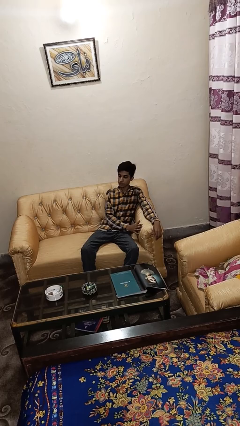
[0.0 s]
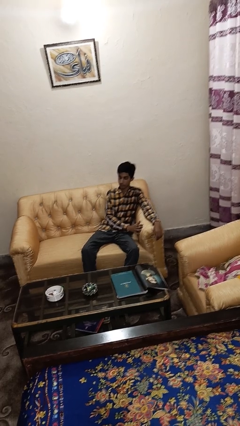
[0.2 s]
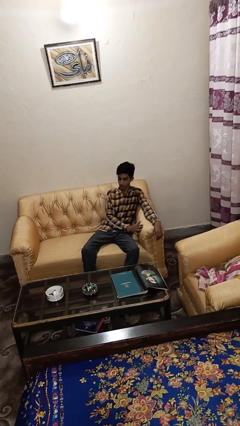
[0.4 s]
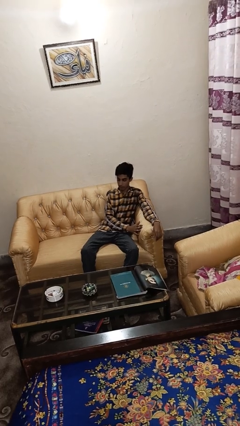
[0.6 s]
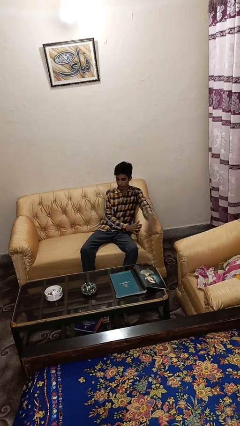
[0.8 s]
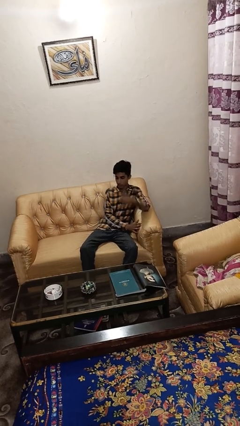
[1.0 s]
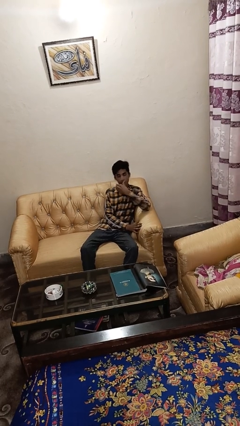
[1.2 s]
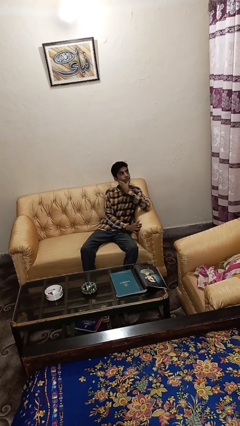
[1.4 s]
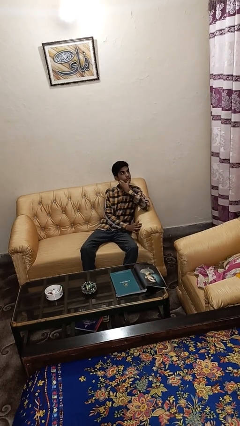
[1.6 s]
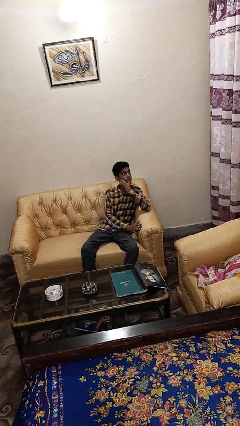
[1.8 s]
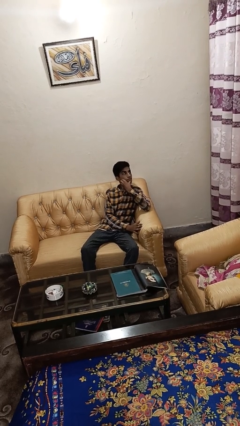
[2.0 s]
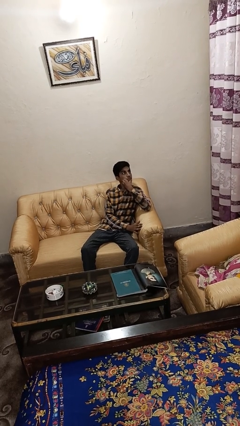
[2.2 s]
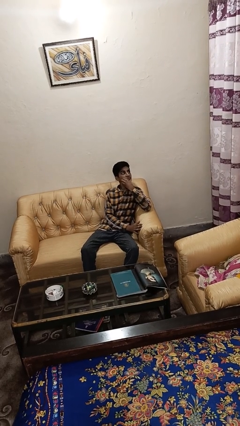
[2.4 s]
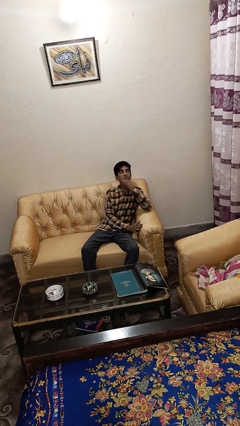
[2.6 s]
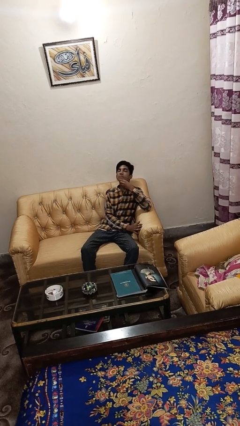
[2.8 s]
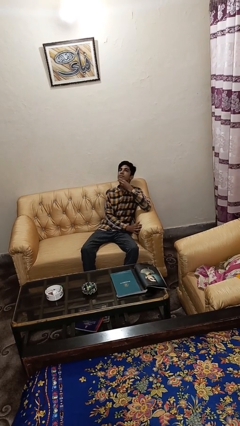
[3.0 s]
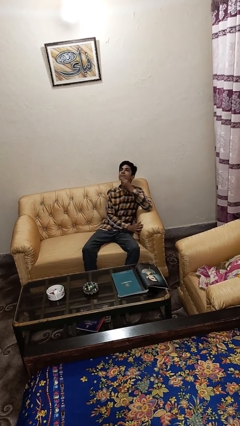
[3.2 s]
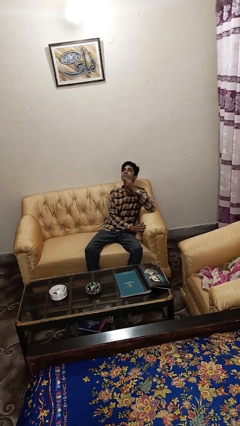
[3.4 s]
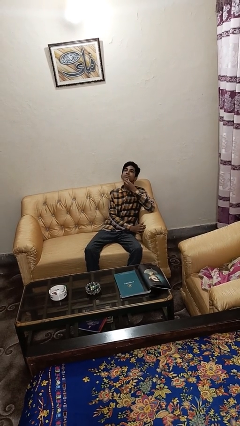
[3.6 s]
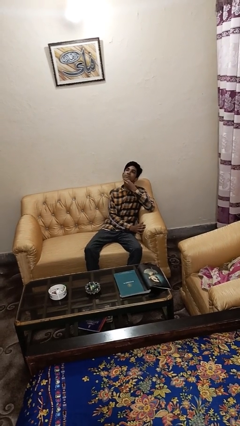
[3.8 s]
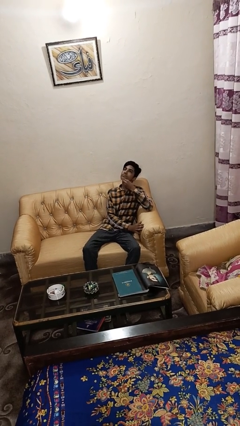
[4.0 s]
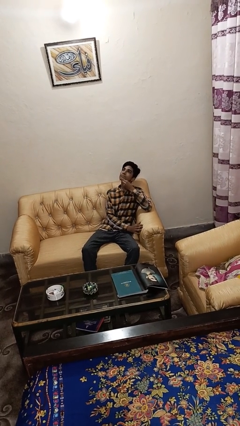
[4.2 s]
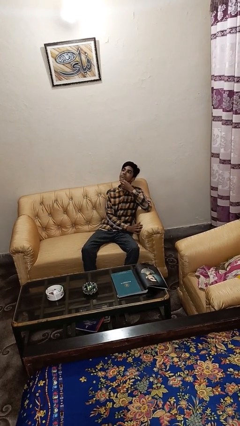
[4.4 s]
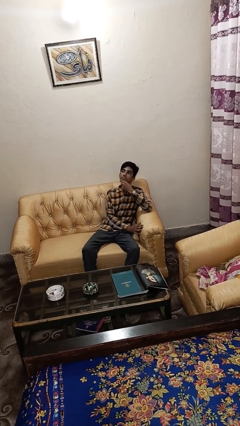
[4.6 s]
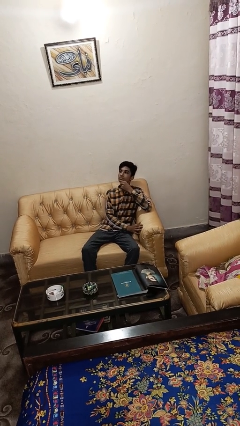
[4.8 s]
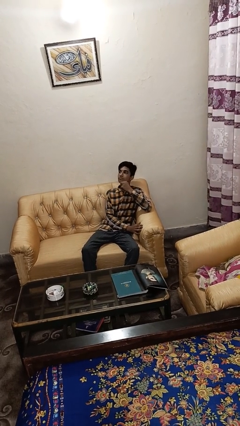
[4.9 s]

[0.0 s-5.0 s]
person strokes chin

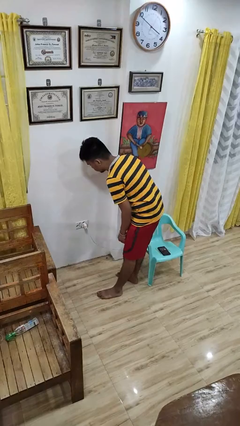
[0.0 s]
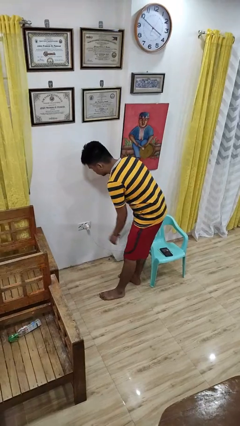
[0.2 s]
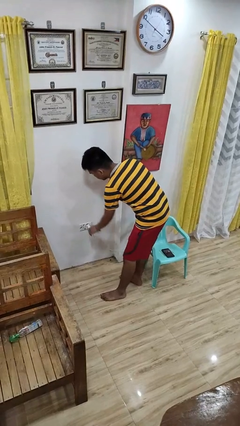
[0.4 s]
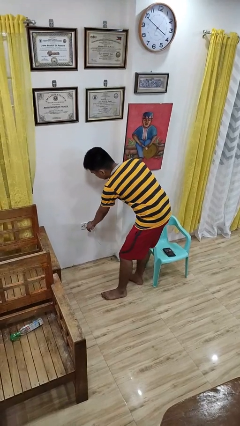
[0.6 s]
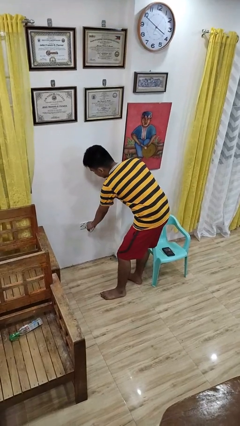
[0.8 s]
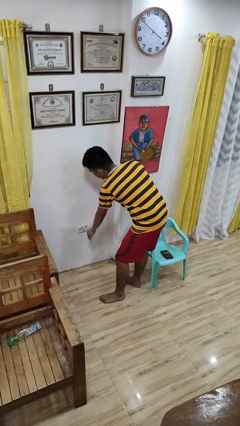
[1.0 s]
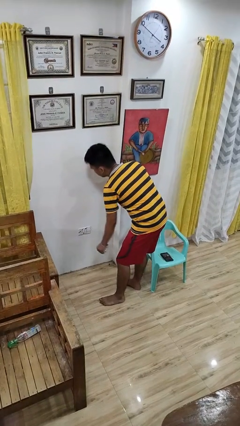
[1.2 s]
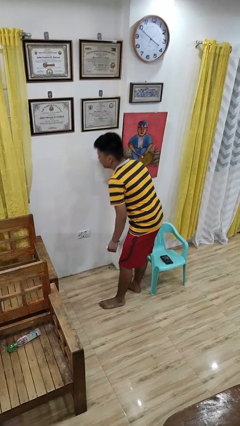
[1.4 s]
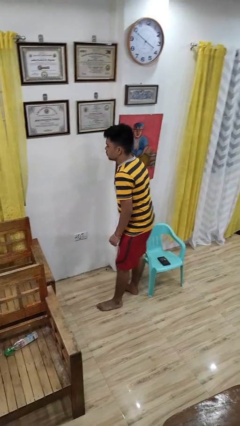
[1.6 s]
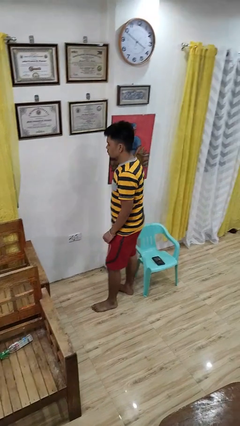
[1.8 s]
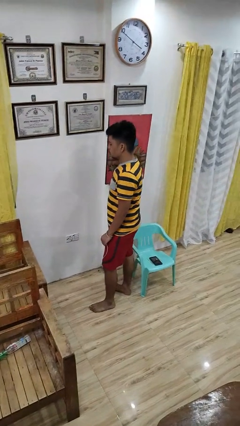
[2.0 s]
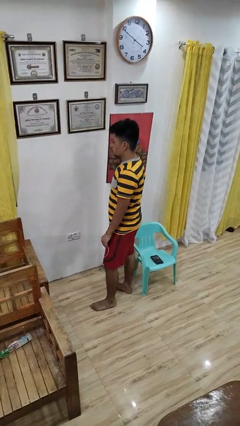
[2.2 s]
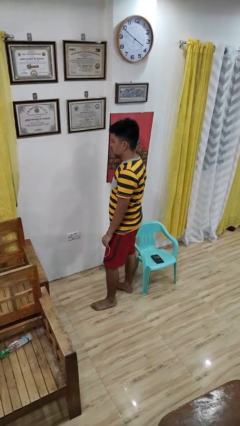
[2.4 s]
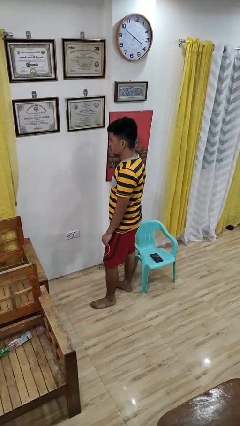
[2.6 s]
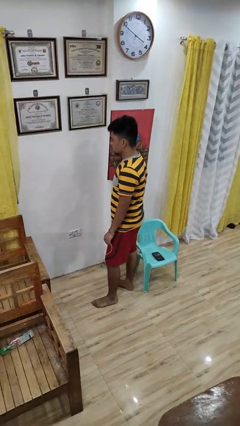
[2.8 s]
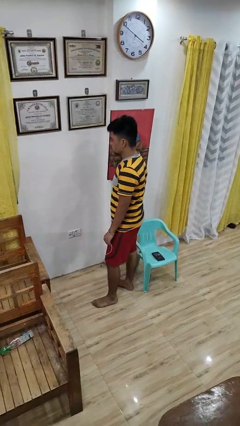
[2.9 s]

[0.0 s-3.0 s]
person unplugs from electrical socket

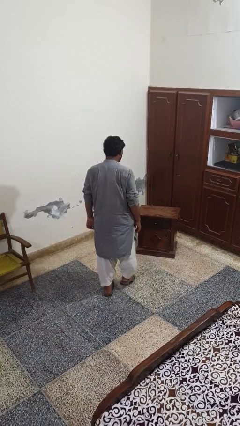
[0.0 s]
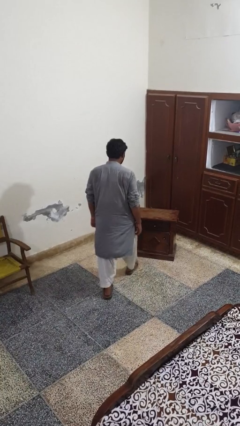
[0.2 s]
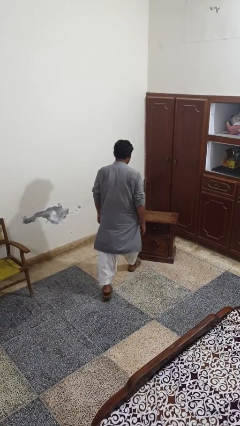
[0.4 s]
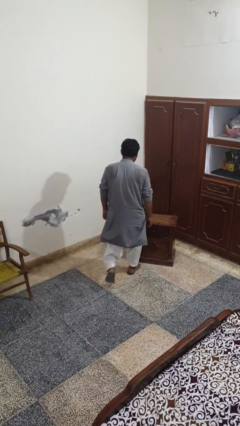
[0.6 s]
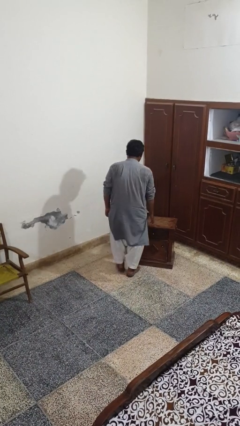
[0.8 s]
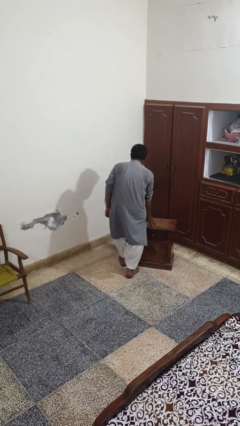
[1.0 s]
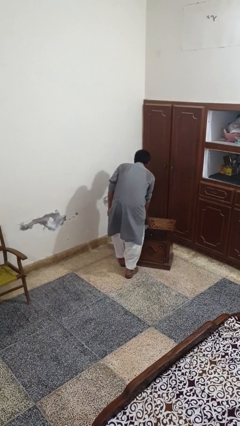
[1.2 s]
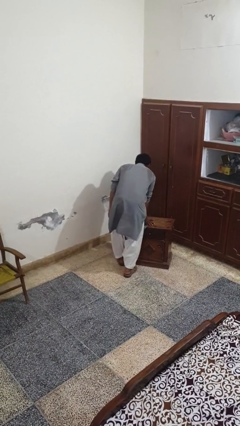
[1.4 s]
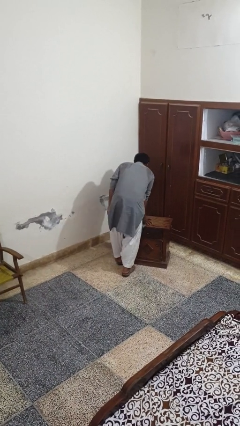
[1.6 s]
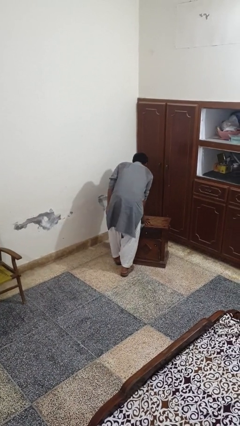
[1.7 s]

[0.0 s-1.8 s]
person bumps into table

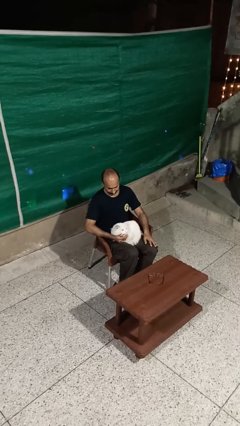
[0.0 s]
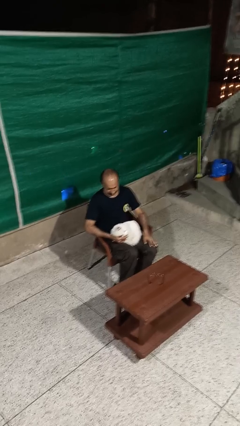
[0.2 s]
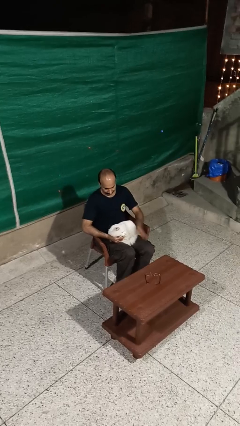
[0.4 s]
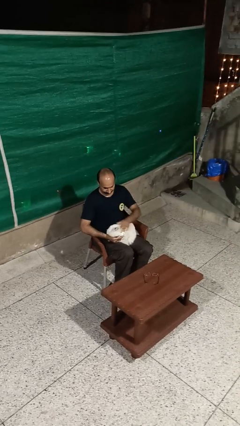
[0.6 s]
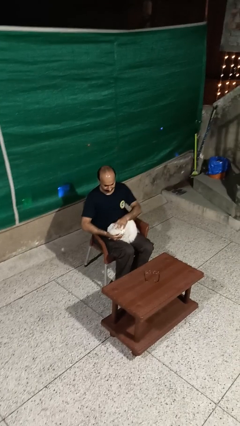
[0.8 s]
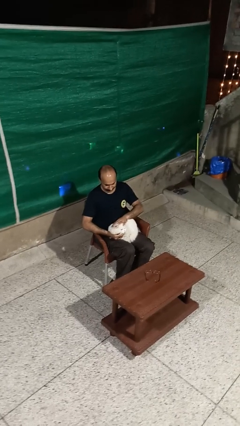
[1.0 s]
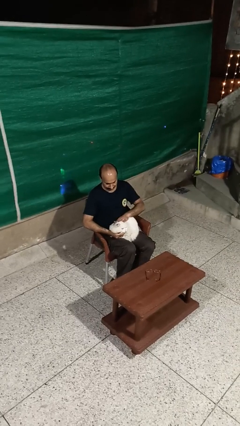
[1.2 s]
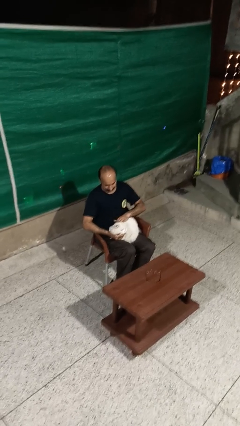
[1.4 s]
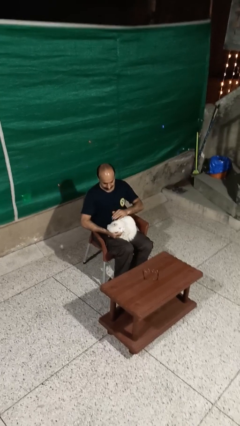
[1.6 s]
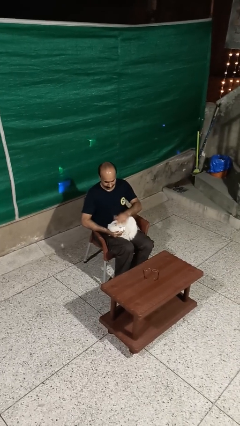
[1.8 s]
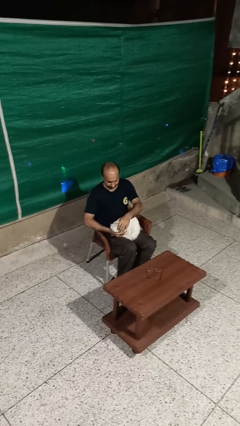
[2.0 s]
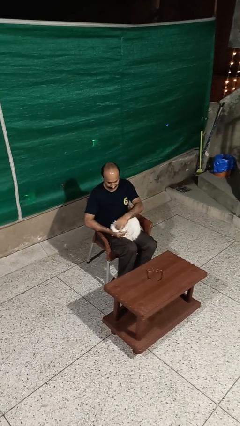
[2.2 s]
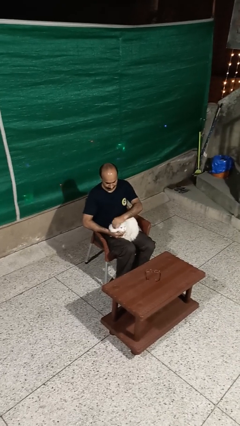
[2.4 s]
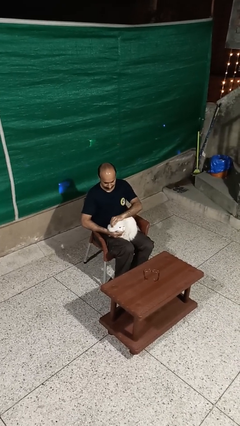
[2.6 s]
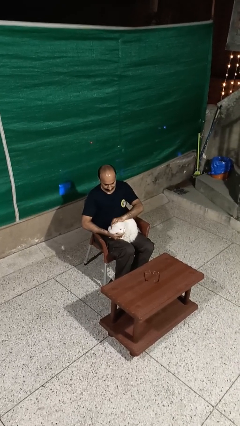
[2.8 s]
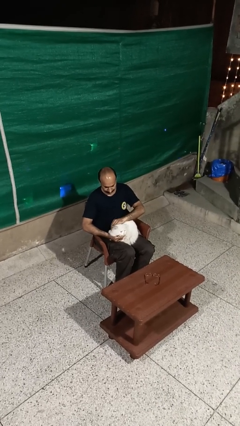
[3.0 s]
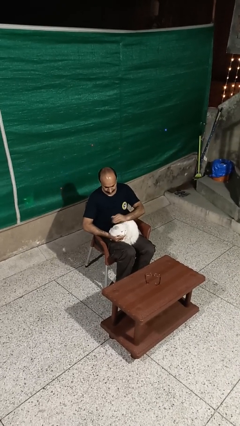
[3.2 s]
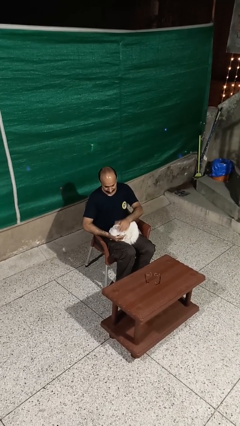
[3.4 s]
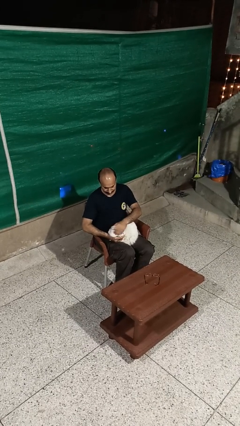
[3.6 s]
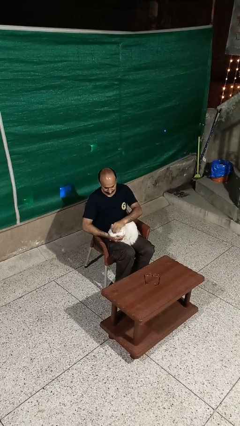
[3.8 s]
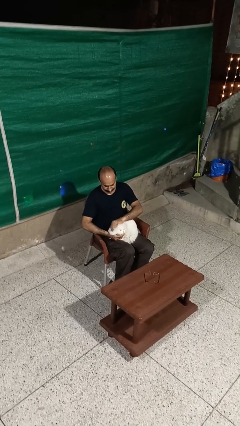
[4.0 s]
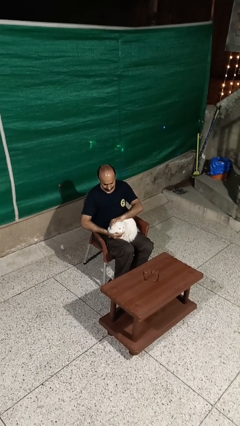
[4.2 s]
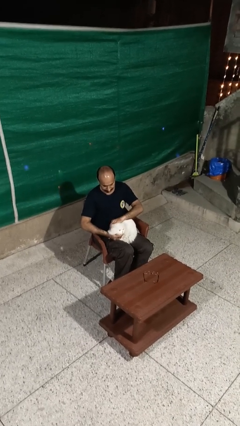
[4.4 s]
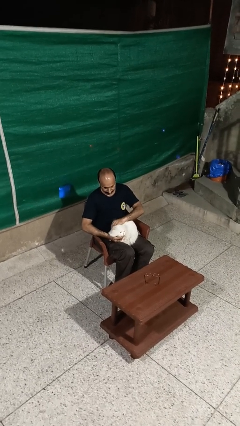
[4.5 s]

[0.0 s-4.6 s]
person pets cat

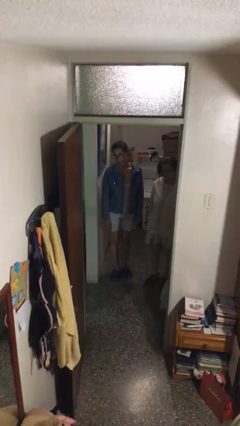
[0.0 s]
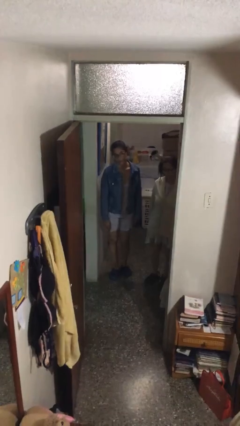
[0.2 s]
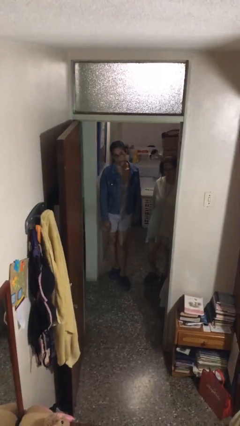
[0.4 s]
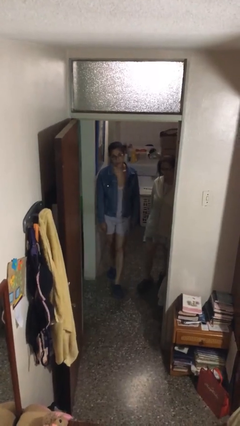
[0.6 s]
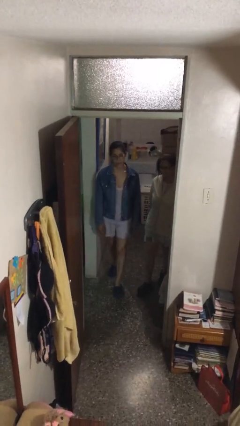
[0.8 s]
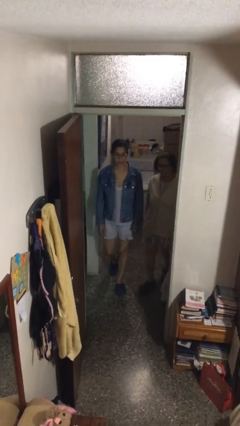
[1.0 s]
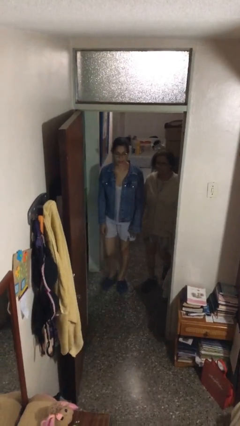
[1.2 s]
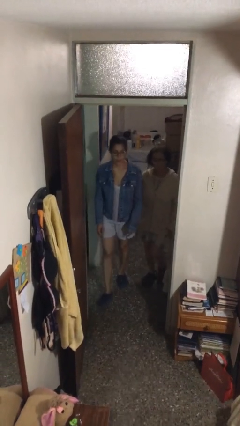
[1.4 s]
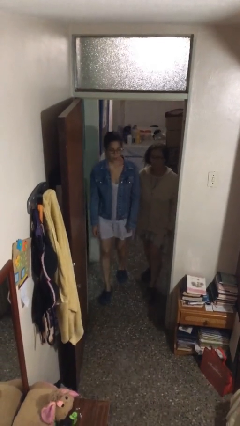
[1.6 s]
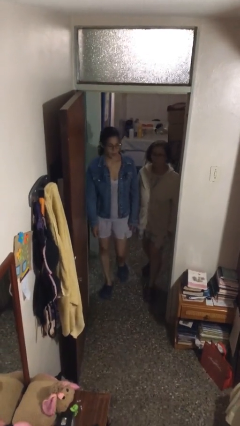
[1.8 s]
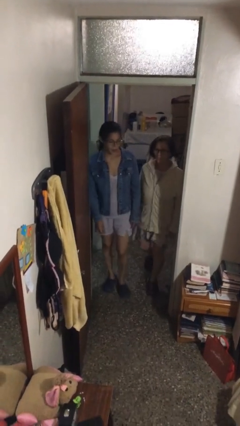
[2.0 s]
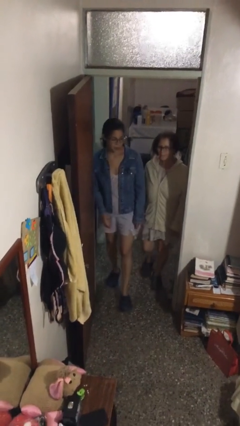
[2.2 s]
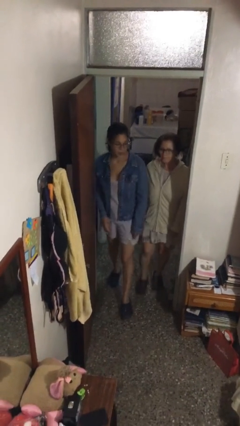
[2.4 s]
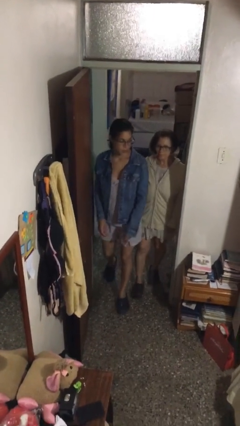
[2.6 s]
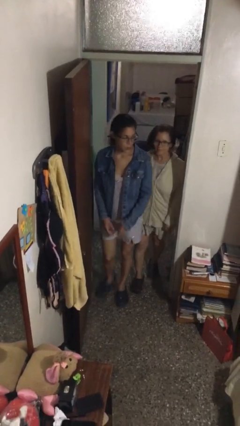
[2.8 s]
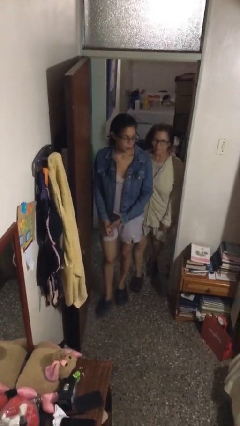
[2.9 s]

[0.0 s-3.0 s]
person talks to person
